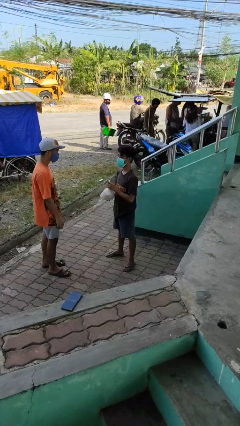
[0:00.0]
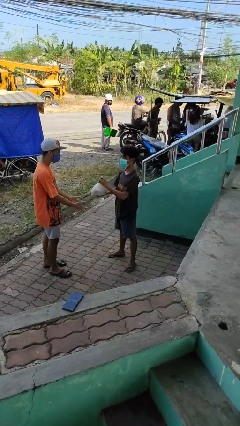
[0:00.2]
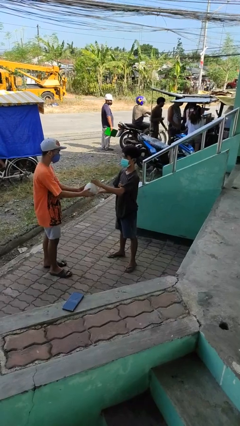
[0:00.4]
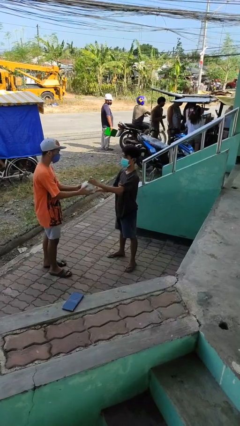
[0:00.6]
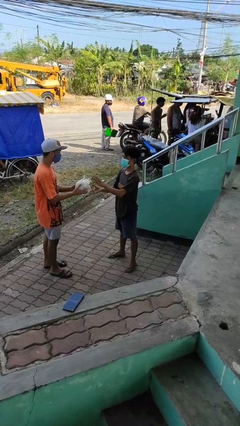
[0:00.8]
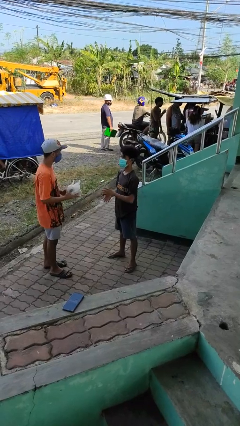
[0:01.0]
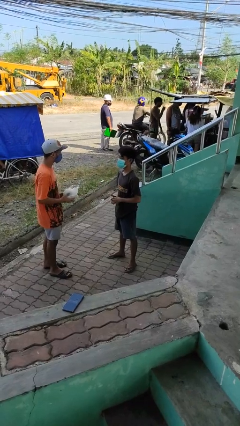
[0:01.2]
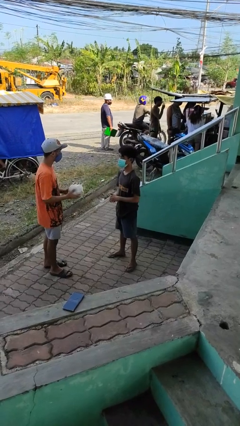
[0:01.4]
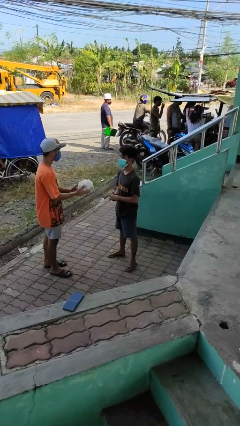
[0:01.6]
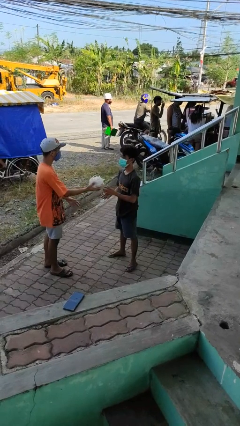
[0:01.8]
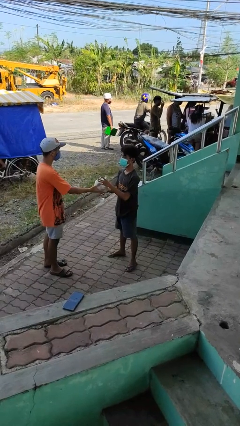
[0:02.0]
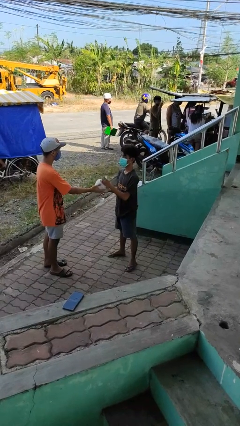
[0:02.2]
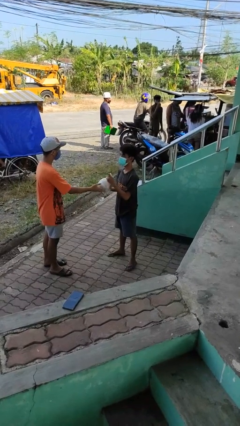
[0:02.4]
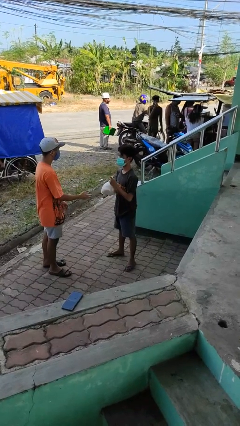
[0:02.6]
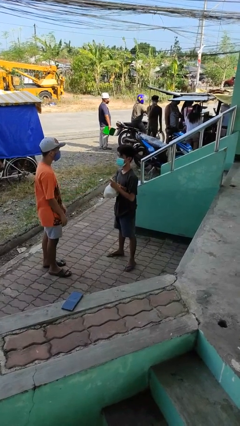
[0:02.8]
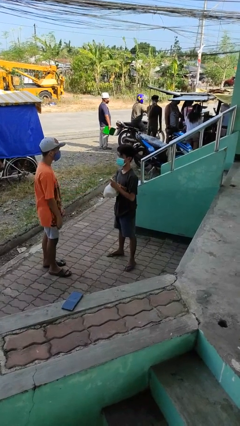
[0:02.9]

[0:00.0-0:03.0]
person transfers object to person

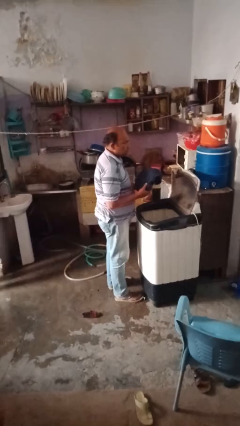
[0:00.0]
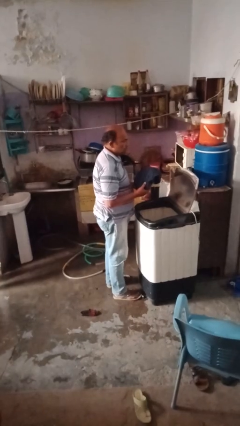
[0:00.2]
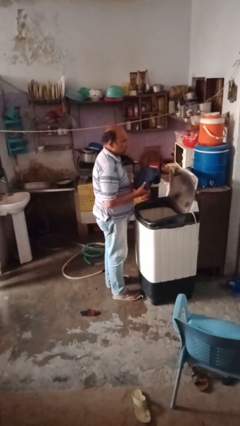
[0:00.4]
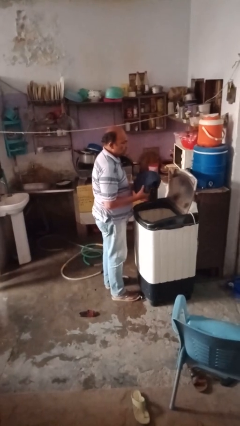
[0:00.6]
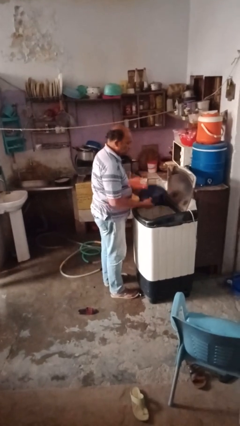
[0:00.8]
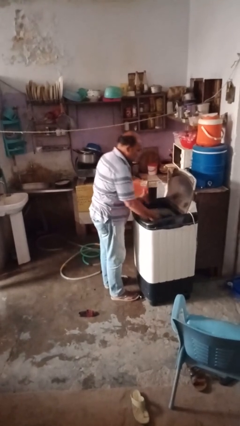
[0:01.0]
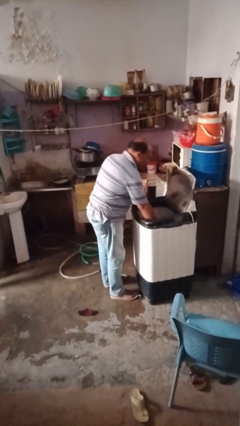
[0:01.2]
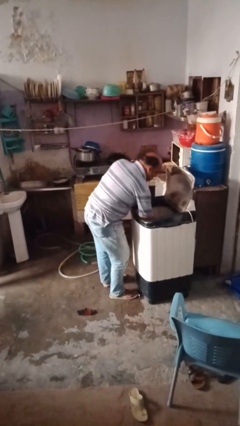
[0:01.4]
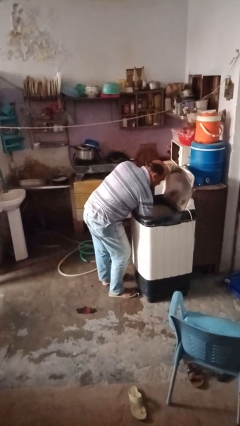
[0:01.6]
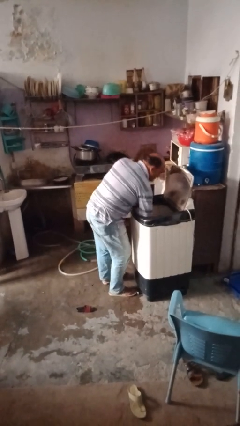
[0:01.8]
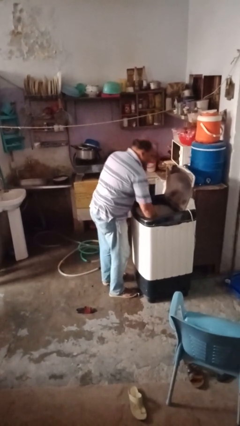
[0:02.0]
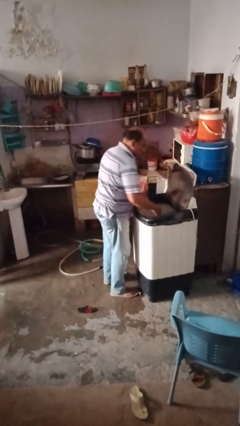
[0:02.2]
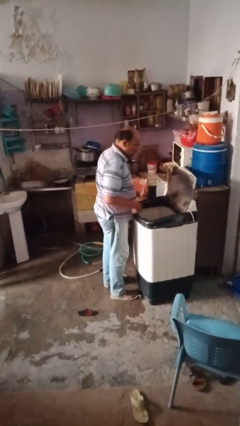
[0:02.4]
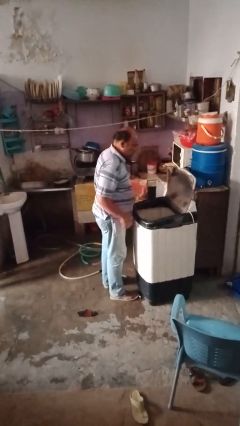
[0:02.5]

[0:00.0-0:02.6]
person loads clotheswasher

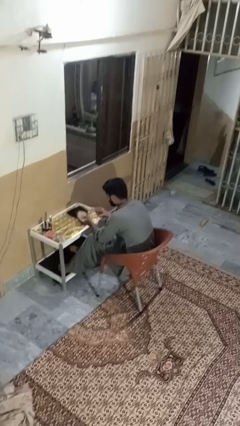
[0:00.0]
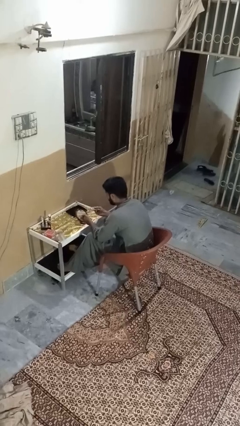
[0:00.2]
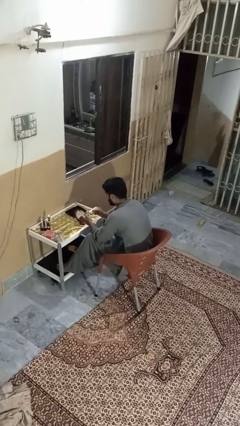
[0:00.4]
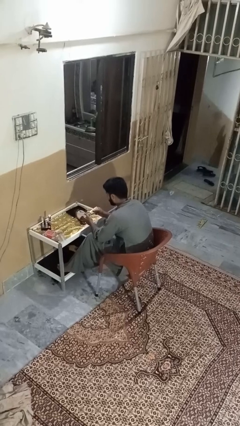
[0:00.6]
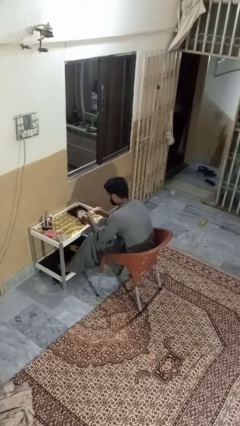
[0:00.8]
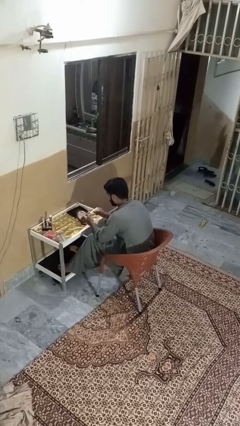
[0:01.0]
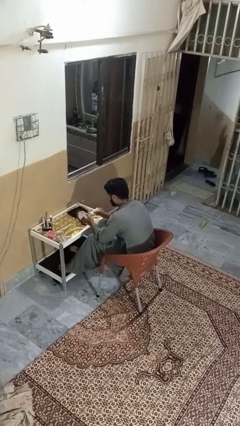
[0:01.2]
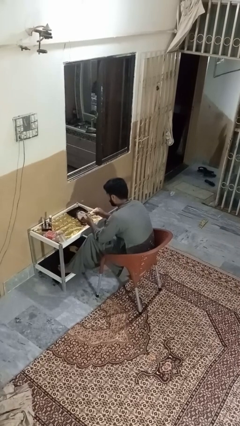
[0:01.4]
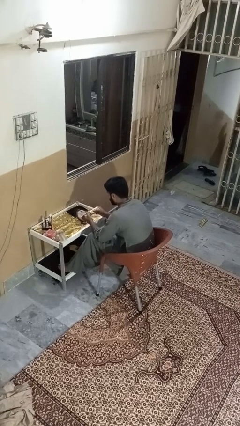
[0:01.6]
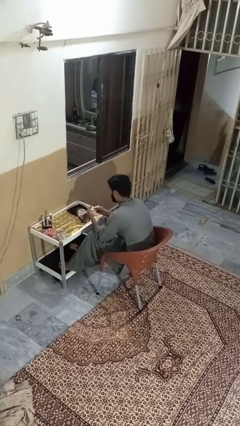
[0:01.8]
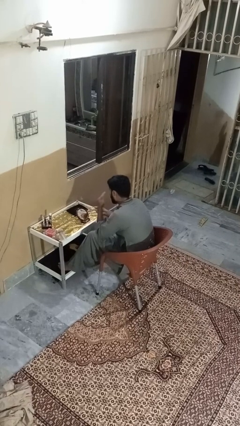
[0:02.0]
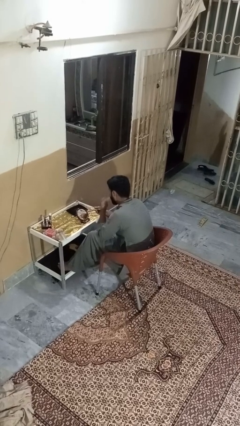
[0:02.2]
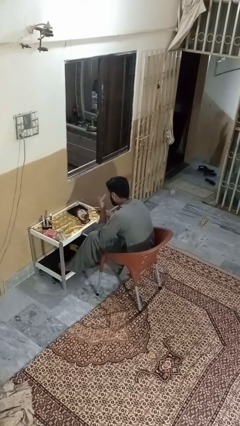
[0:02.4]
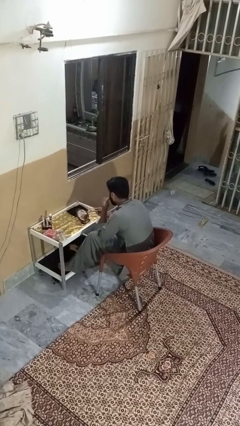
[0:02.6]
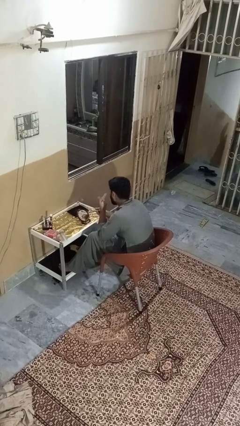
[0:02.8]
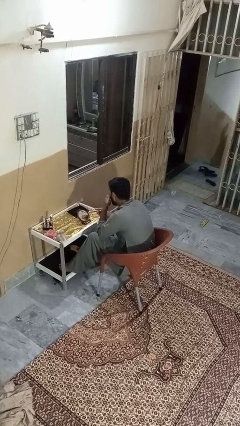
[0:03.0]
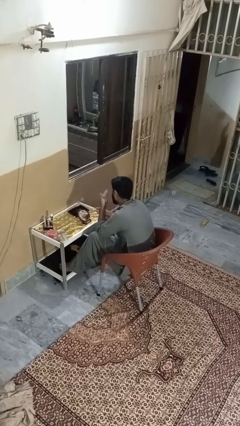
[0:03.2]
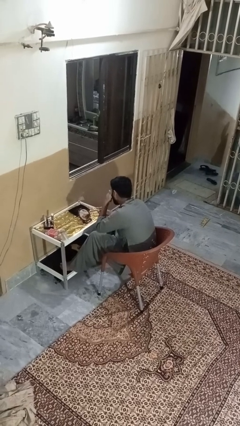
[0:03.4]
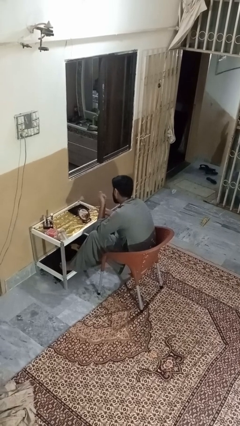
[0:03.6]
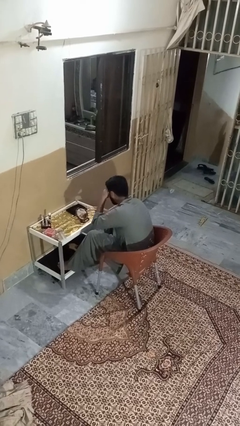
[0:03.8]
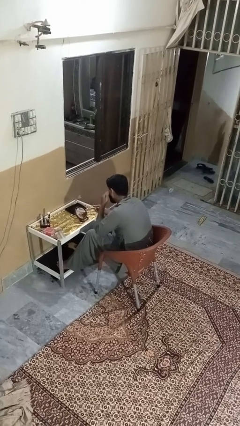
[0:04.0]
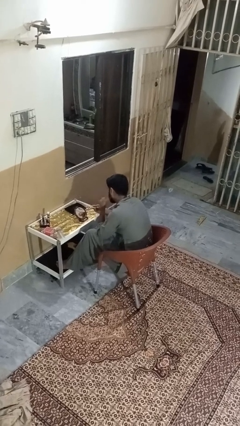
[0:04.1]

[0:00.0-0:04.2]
person applies foundation makeup

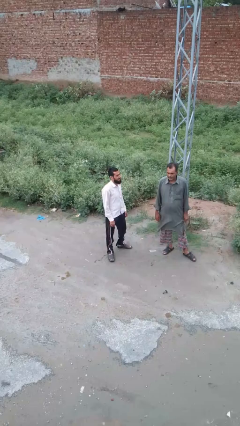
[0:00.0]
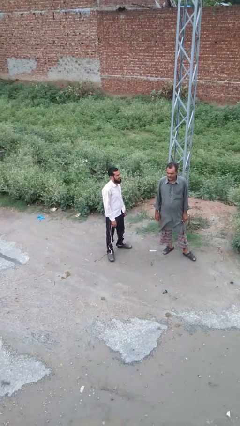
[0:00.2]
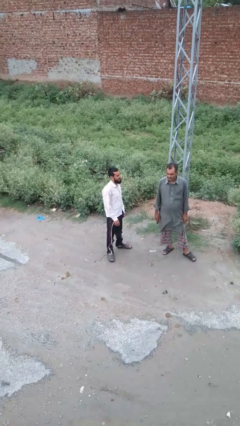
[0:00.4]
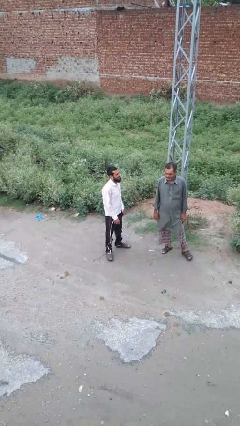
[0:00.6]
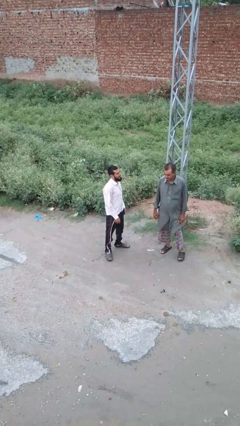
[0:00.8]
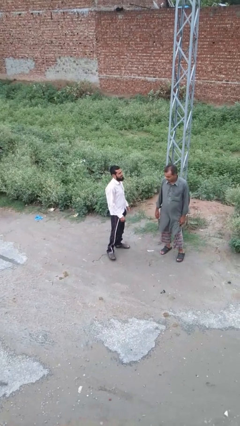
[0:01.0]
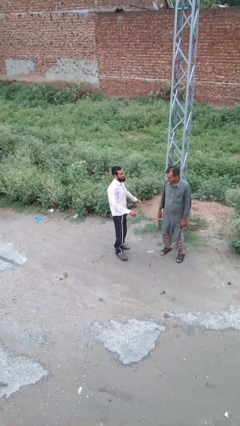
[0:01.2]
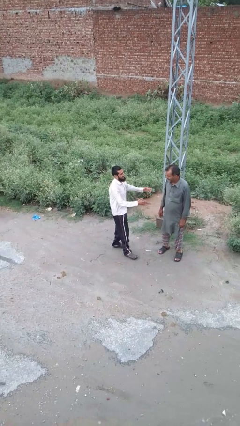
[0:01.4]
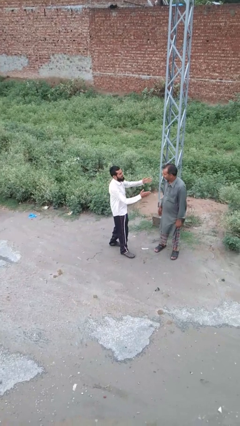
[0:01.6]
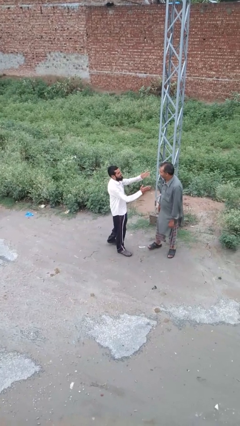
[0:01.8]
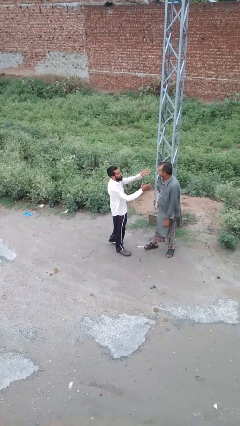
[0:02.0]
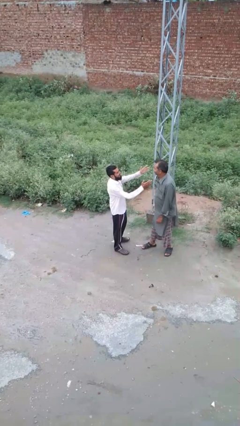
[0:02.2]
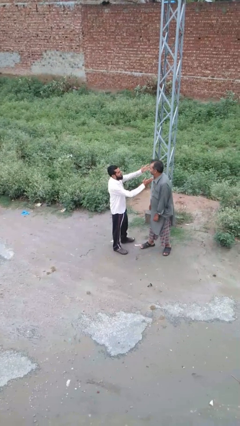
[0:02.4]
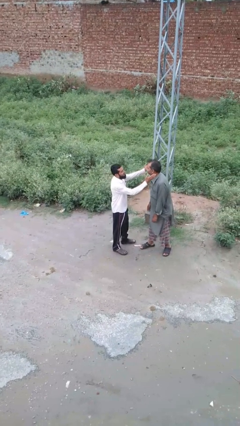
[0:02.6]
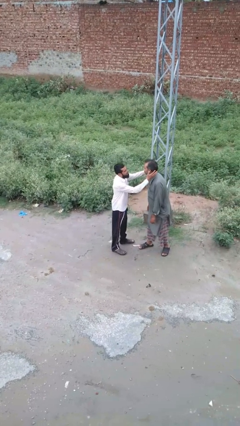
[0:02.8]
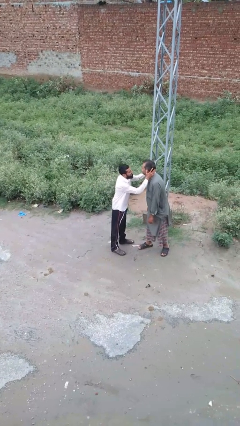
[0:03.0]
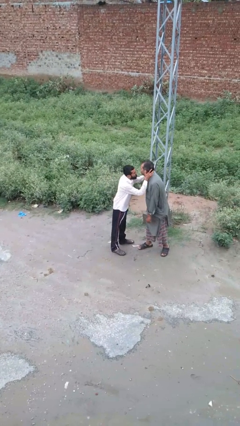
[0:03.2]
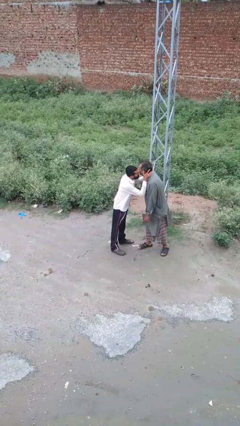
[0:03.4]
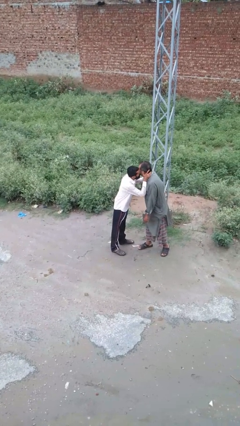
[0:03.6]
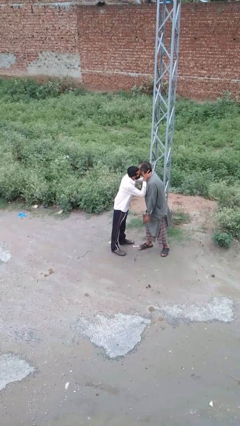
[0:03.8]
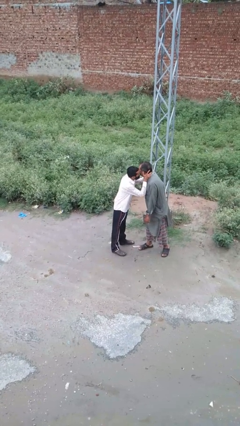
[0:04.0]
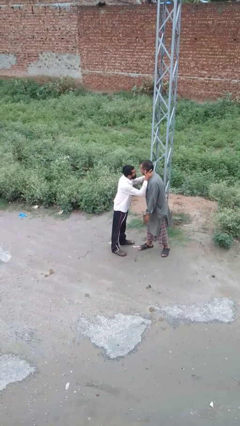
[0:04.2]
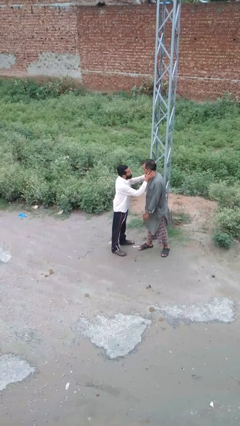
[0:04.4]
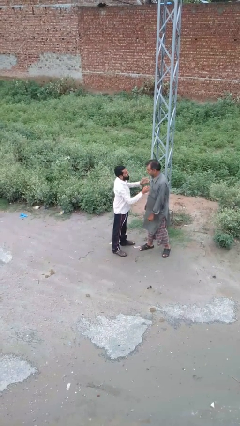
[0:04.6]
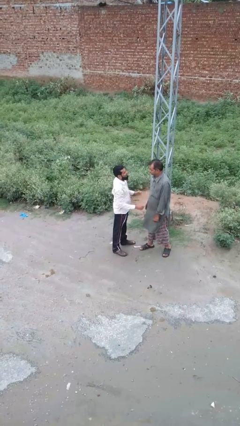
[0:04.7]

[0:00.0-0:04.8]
person kisses cheek of person

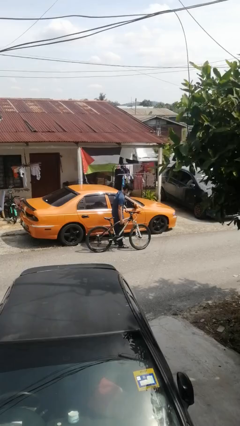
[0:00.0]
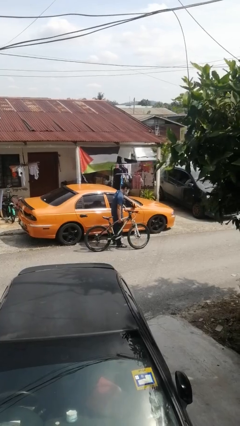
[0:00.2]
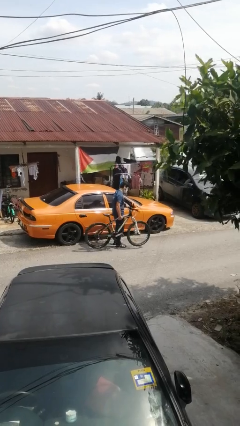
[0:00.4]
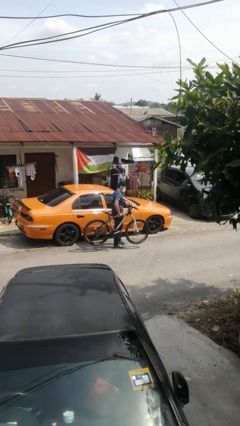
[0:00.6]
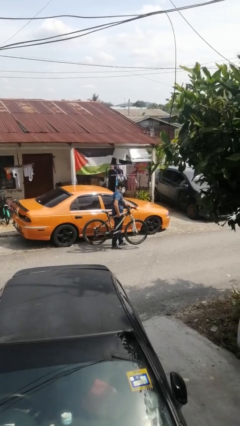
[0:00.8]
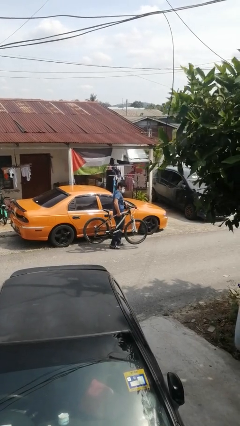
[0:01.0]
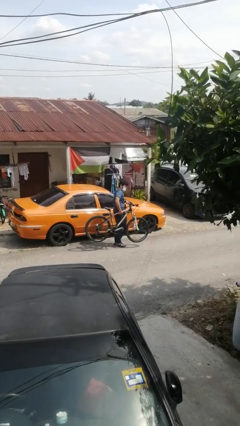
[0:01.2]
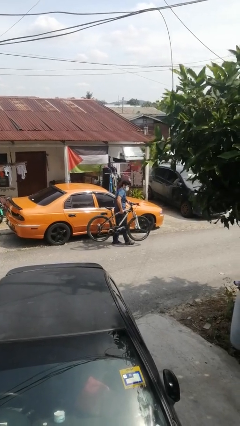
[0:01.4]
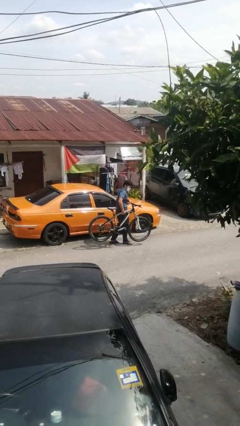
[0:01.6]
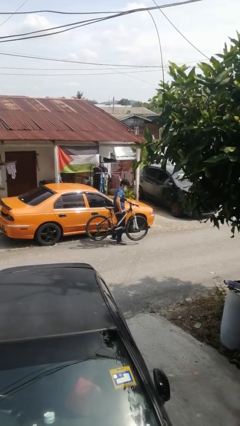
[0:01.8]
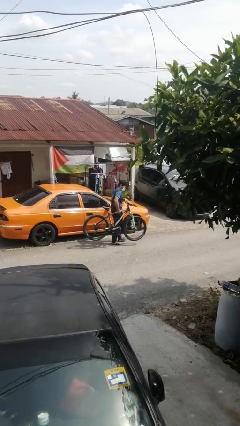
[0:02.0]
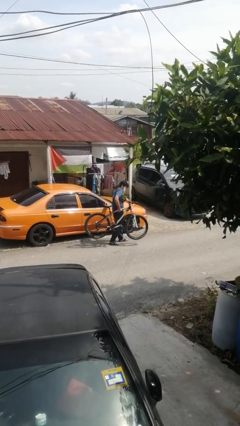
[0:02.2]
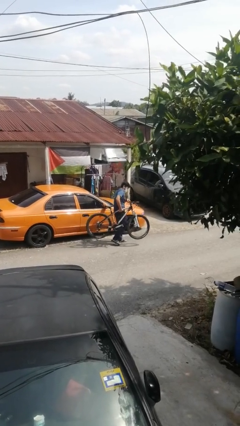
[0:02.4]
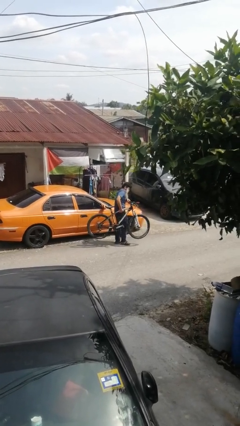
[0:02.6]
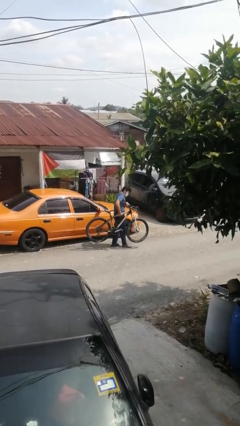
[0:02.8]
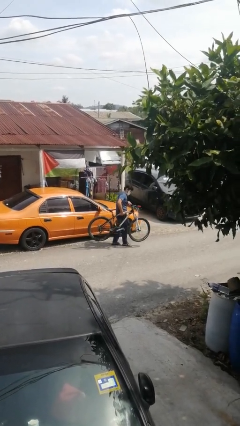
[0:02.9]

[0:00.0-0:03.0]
person carries bicycle
